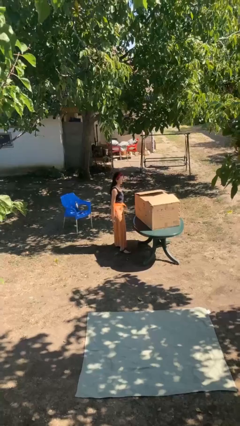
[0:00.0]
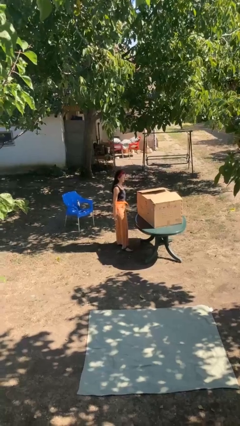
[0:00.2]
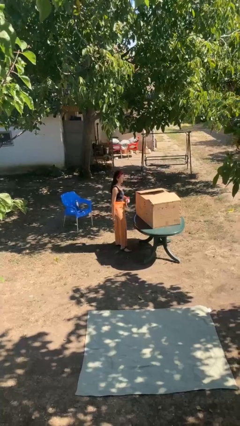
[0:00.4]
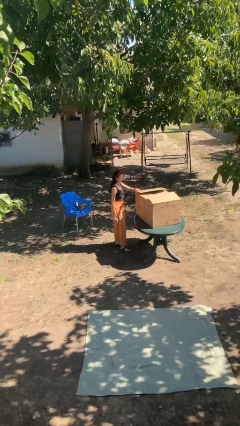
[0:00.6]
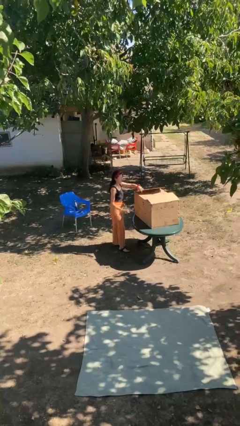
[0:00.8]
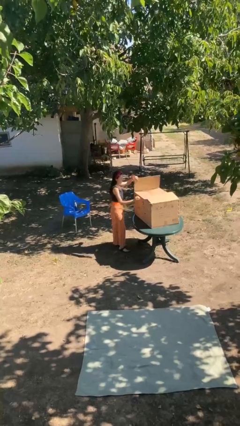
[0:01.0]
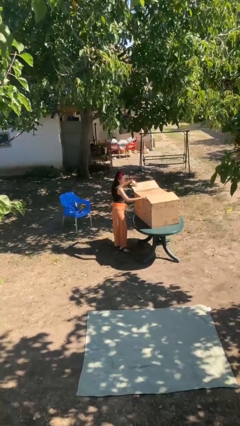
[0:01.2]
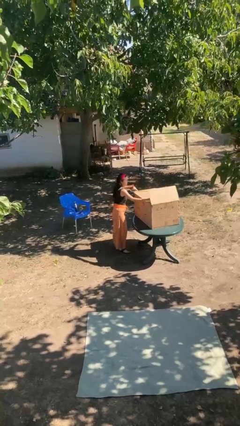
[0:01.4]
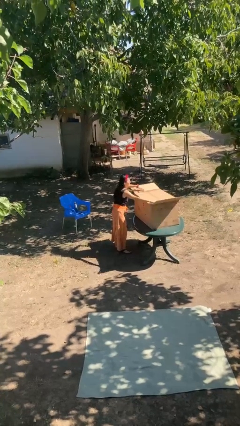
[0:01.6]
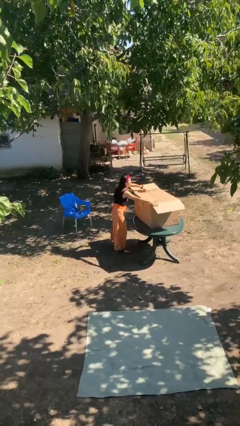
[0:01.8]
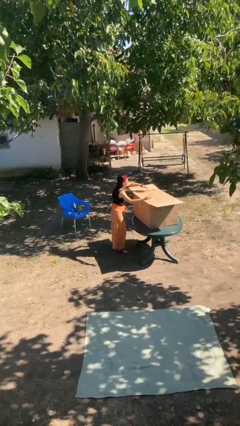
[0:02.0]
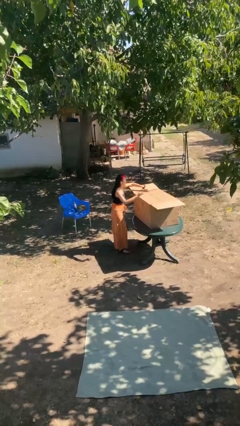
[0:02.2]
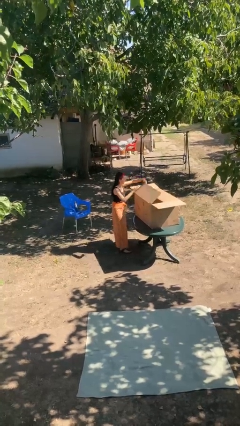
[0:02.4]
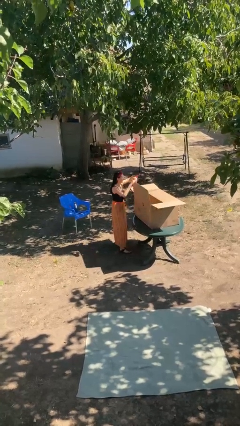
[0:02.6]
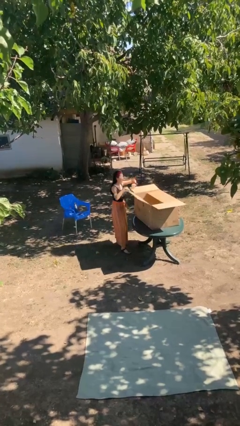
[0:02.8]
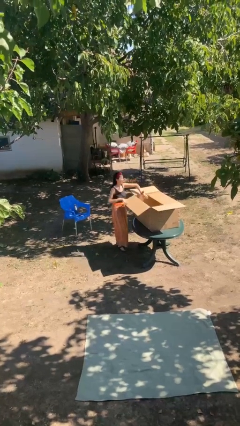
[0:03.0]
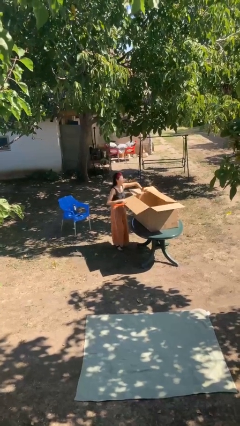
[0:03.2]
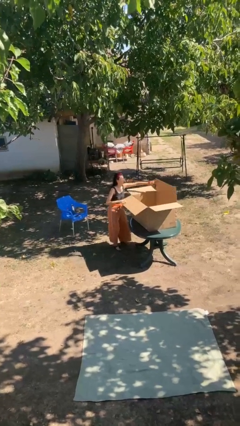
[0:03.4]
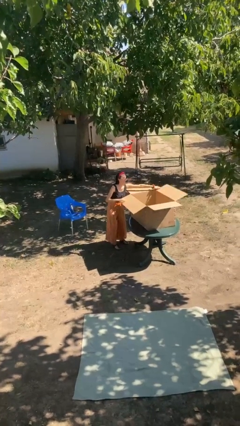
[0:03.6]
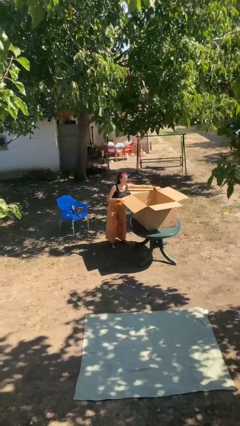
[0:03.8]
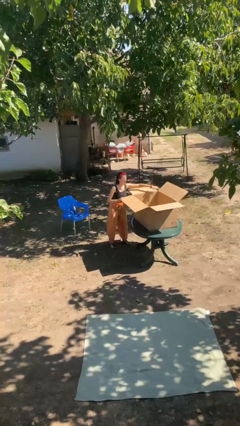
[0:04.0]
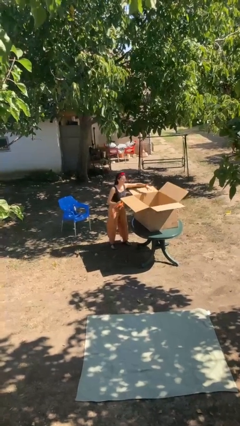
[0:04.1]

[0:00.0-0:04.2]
person opens box

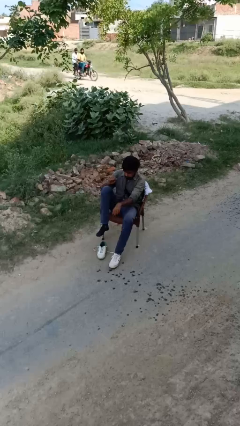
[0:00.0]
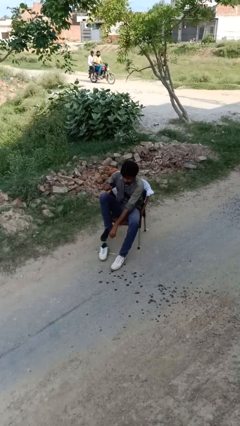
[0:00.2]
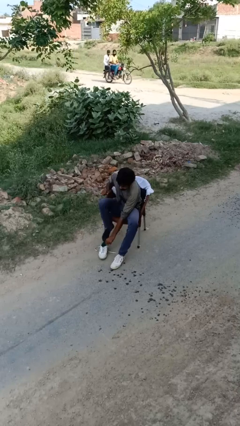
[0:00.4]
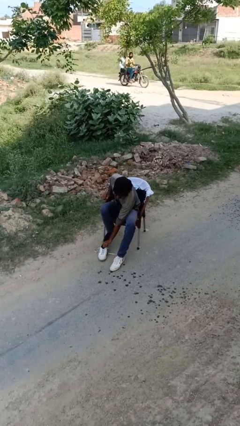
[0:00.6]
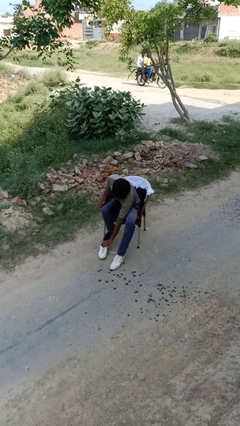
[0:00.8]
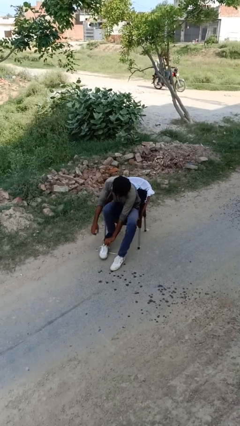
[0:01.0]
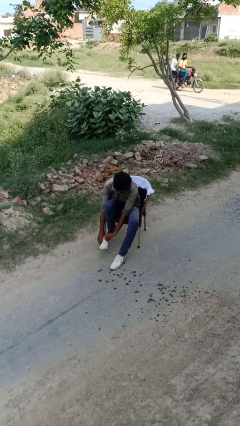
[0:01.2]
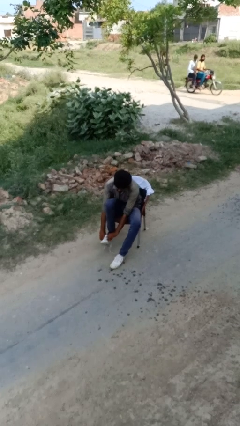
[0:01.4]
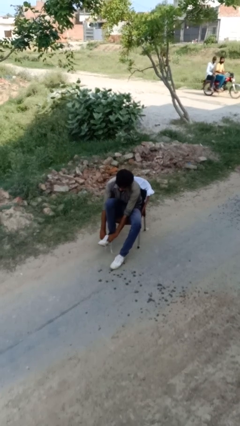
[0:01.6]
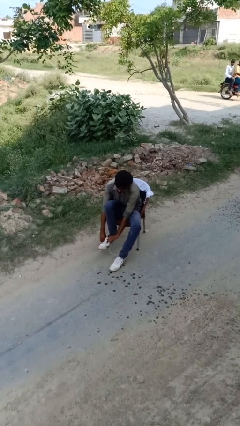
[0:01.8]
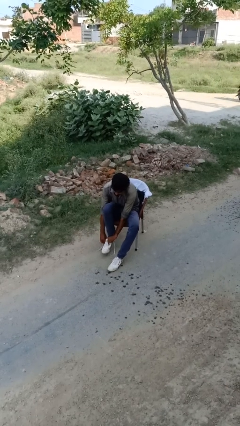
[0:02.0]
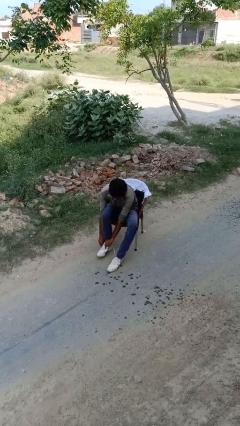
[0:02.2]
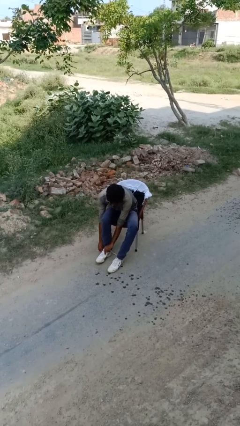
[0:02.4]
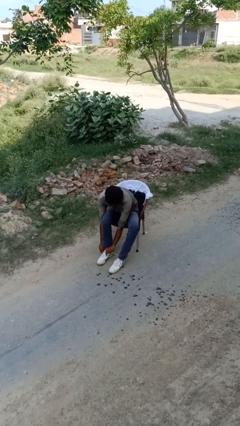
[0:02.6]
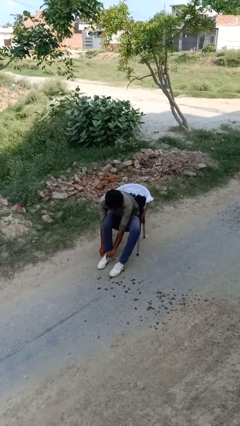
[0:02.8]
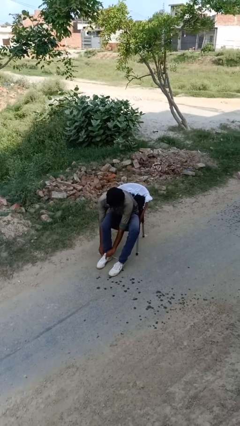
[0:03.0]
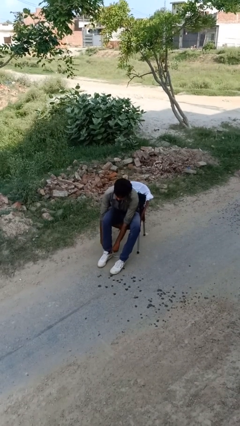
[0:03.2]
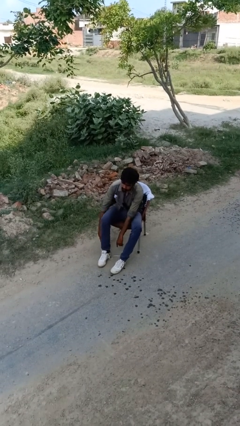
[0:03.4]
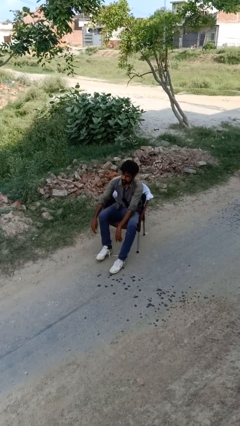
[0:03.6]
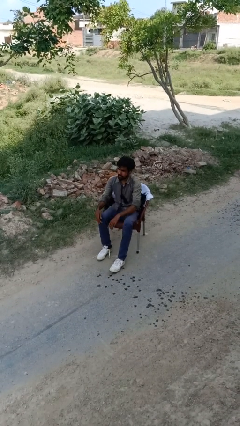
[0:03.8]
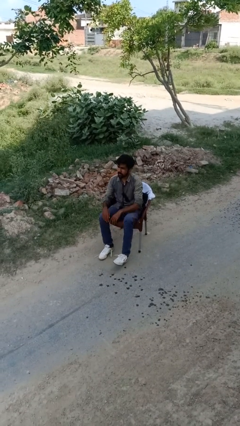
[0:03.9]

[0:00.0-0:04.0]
person puts on shoes

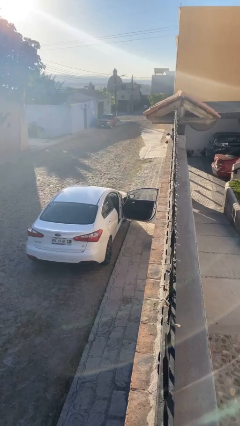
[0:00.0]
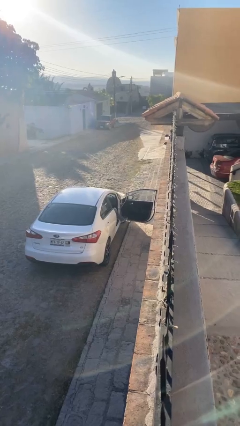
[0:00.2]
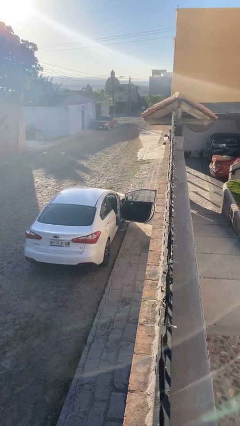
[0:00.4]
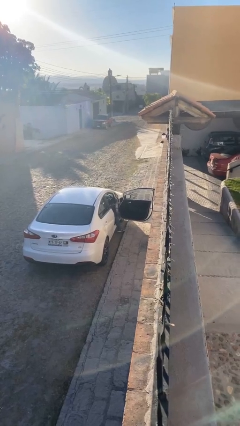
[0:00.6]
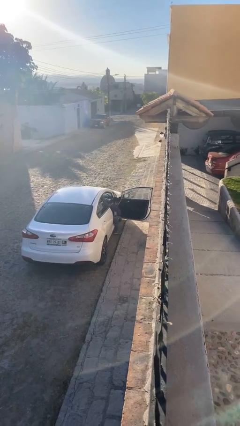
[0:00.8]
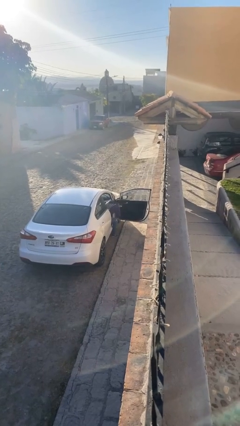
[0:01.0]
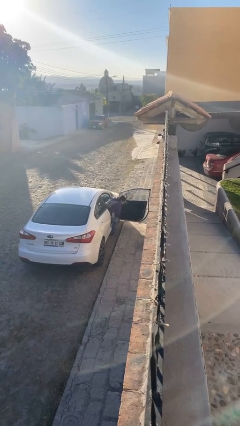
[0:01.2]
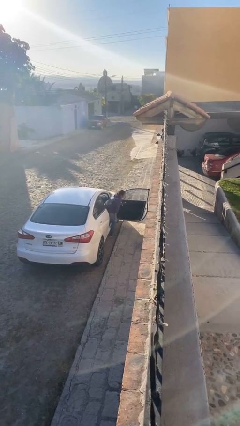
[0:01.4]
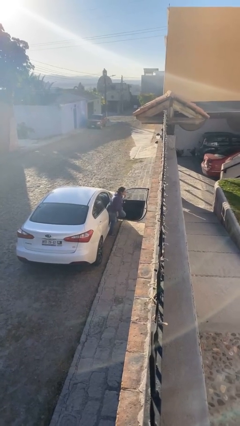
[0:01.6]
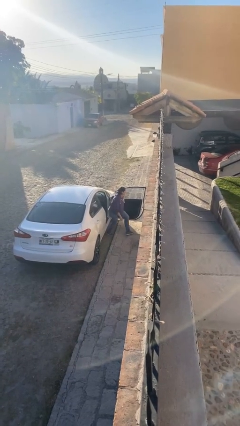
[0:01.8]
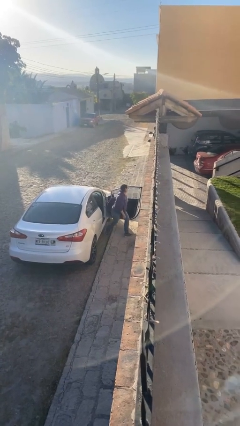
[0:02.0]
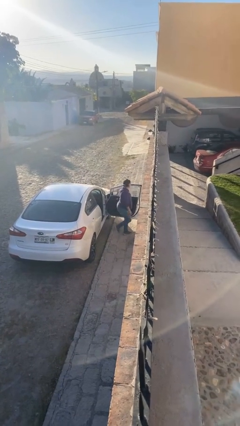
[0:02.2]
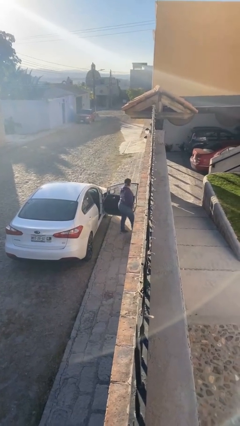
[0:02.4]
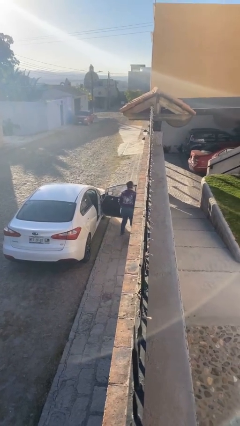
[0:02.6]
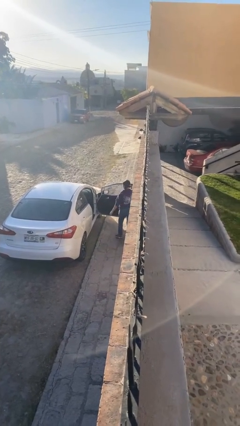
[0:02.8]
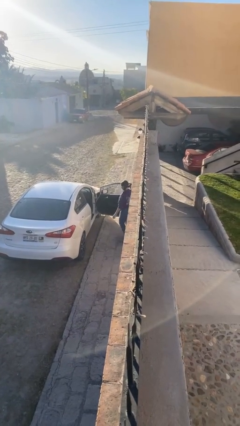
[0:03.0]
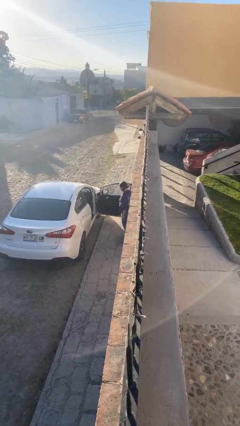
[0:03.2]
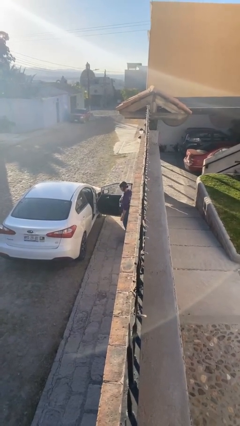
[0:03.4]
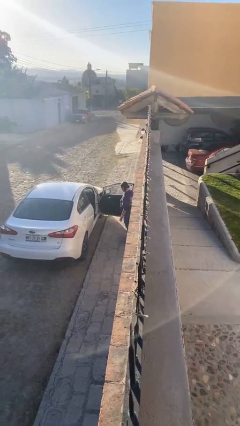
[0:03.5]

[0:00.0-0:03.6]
person exits car

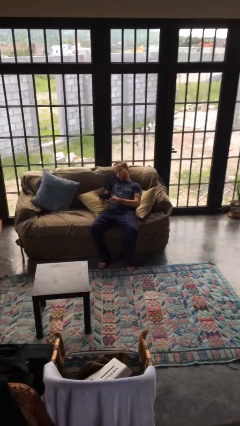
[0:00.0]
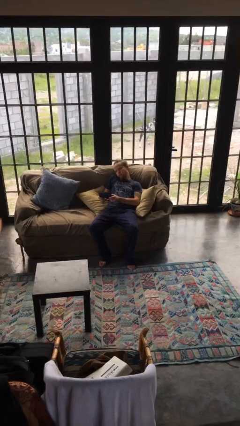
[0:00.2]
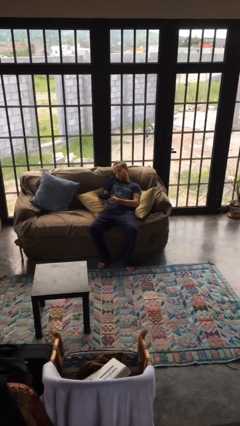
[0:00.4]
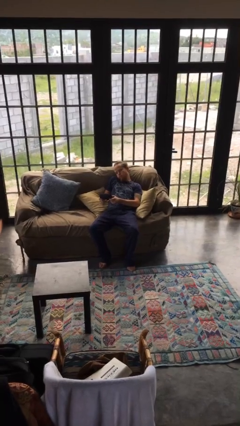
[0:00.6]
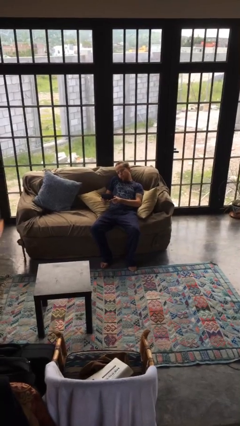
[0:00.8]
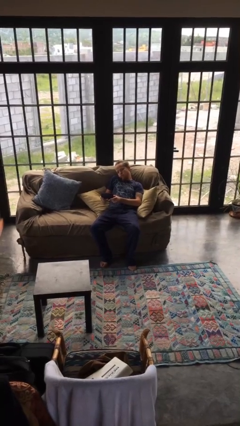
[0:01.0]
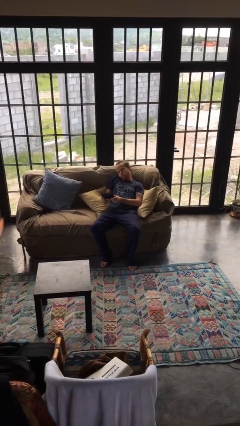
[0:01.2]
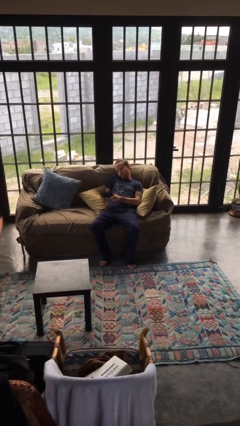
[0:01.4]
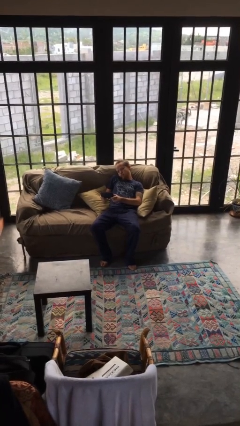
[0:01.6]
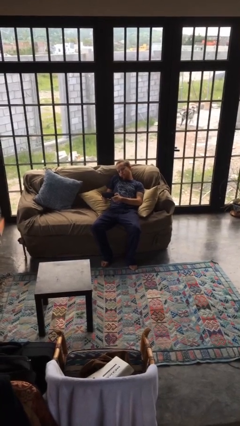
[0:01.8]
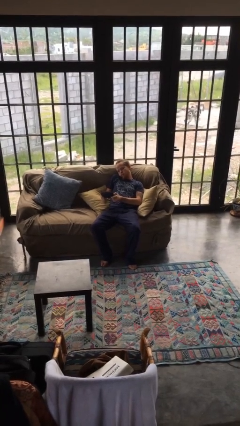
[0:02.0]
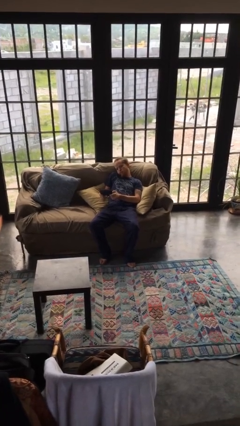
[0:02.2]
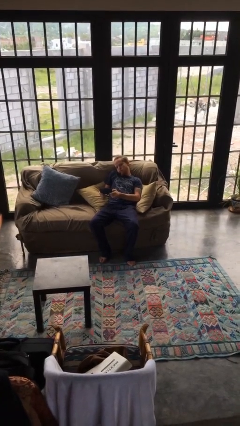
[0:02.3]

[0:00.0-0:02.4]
person interacts with handheld game

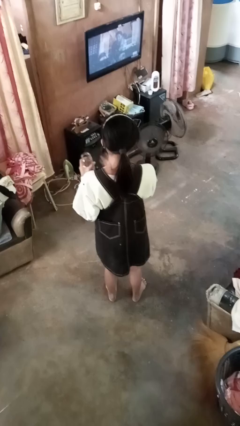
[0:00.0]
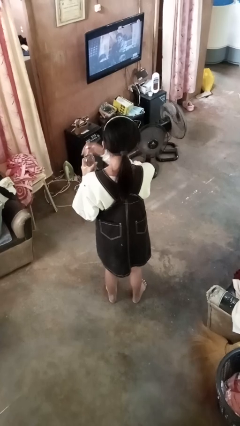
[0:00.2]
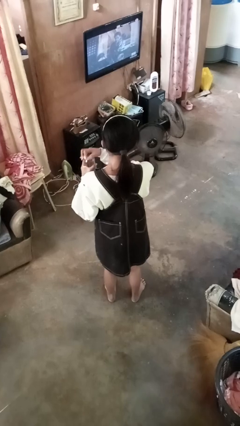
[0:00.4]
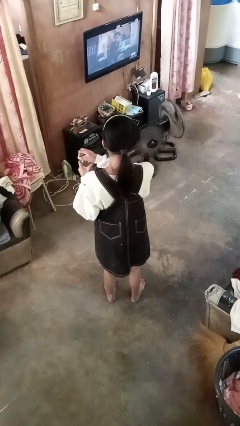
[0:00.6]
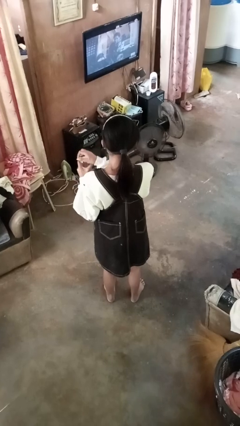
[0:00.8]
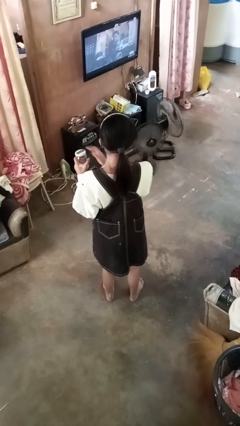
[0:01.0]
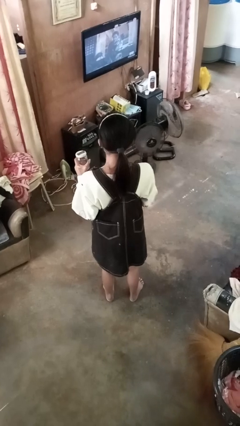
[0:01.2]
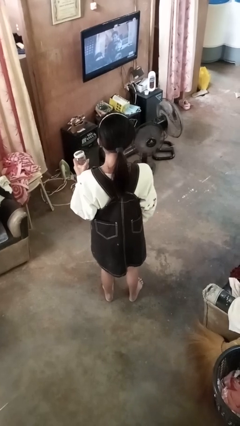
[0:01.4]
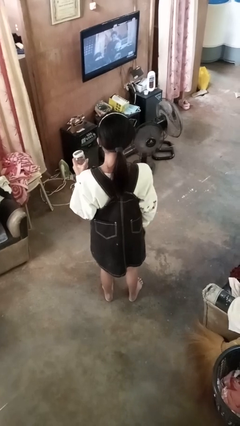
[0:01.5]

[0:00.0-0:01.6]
person closes jar

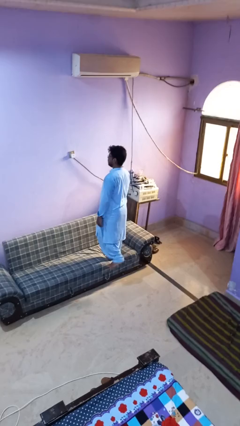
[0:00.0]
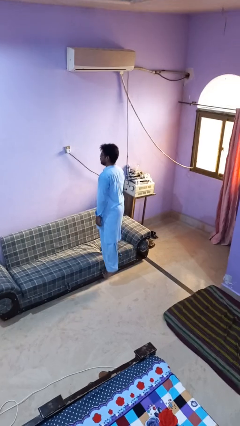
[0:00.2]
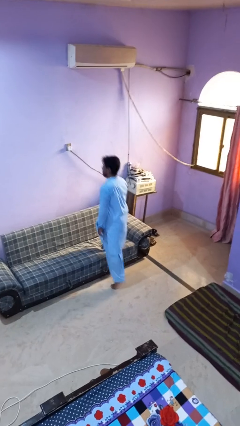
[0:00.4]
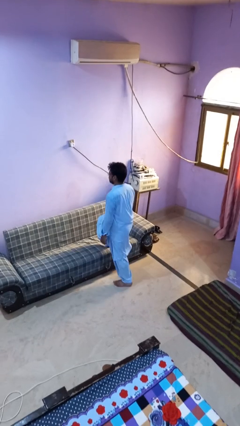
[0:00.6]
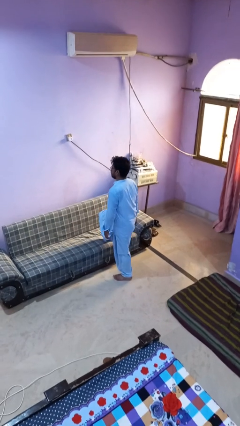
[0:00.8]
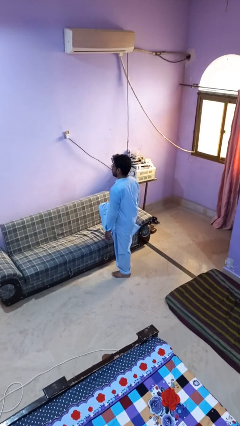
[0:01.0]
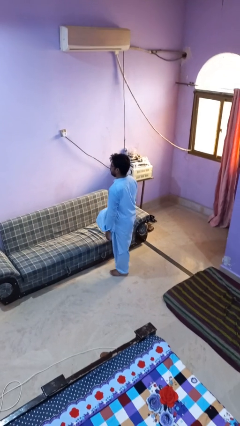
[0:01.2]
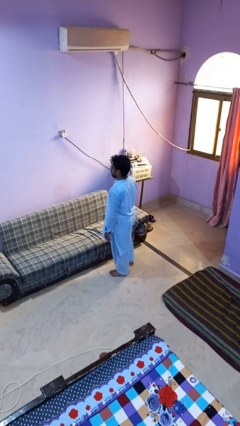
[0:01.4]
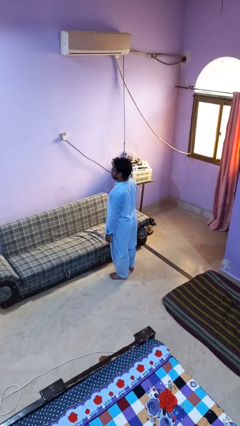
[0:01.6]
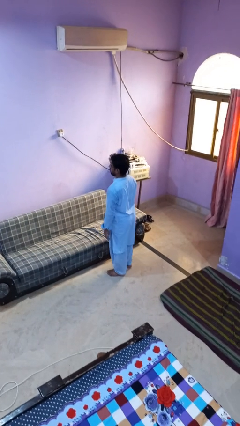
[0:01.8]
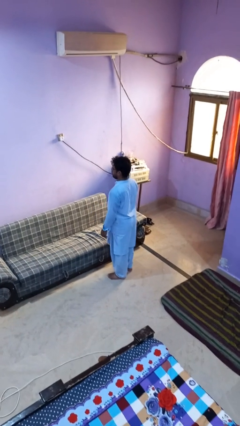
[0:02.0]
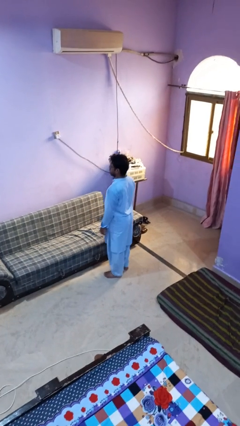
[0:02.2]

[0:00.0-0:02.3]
person climbs off couch
